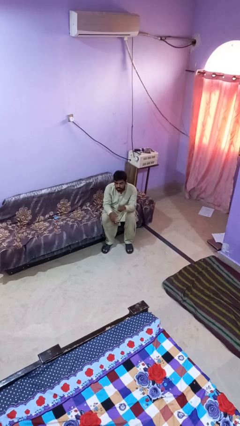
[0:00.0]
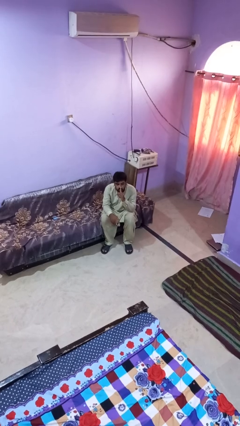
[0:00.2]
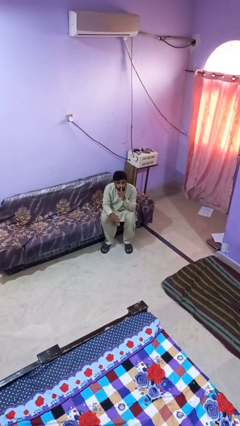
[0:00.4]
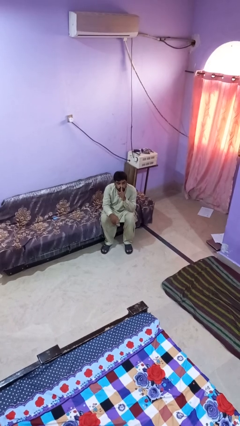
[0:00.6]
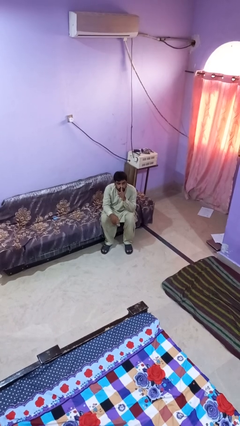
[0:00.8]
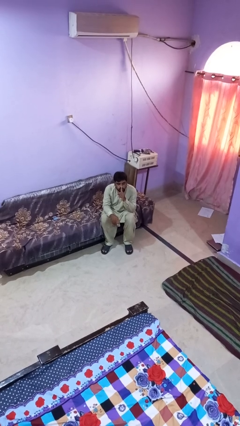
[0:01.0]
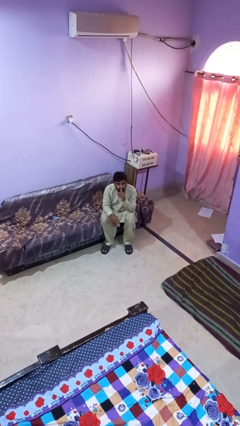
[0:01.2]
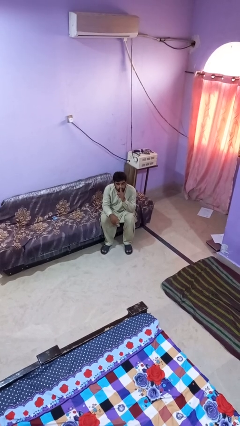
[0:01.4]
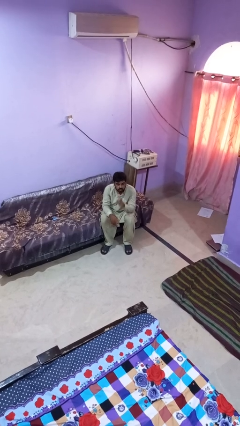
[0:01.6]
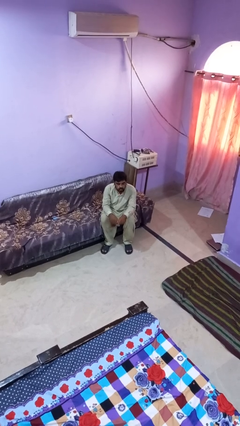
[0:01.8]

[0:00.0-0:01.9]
person gestures be quiet

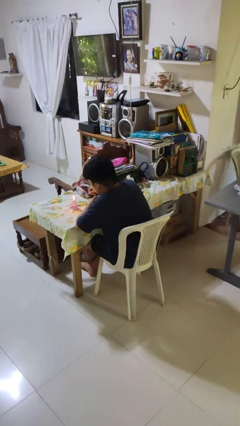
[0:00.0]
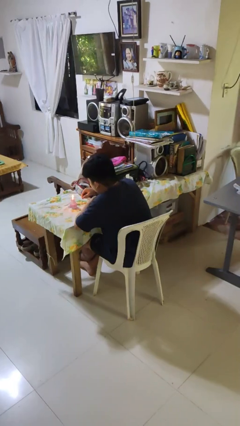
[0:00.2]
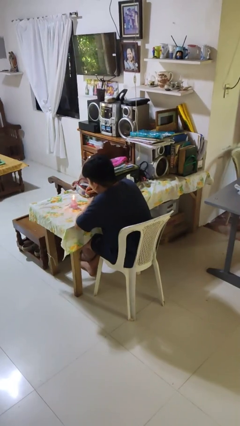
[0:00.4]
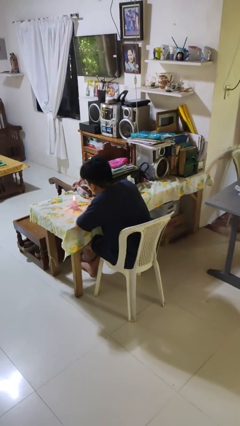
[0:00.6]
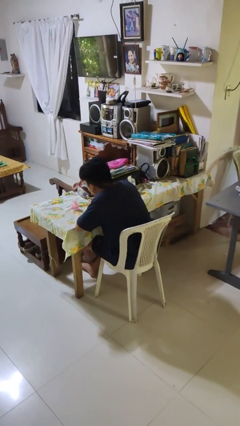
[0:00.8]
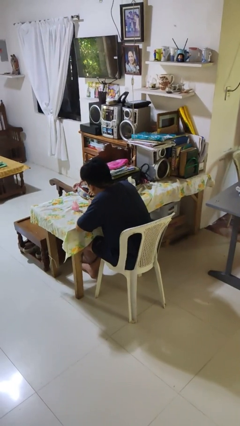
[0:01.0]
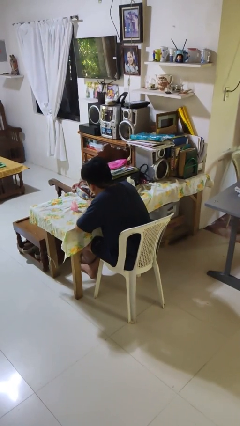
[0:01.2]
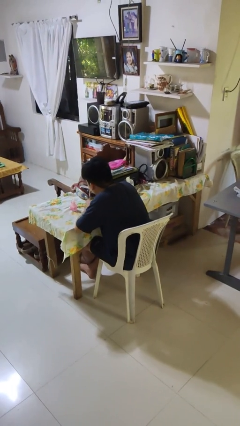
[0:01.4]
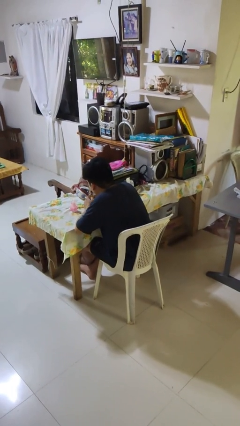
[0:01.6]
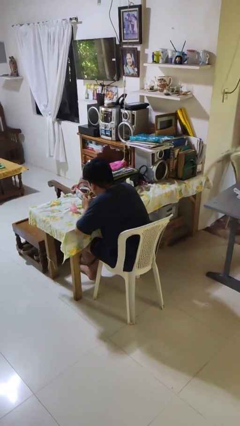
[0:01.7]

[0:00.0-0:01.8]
person extinguishes candle

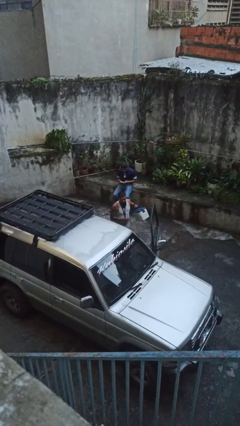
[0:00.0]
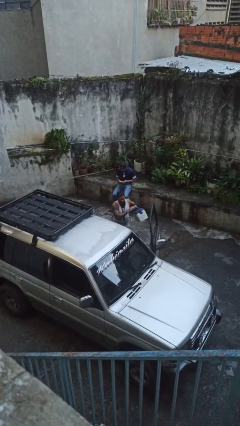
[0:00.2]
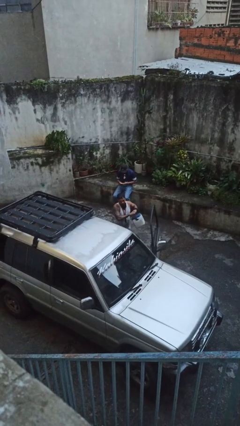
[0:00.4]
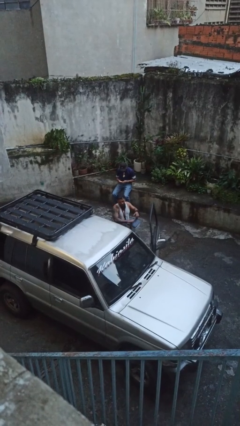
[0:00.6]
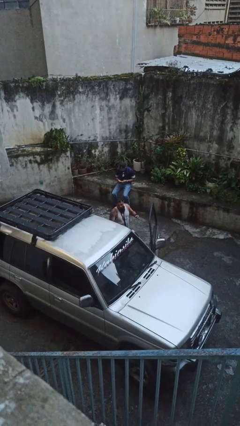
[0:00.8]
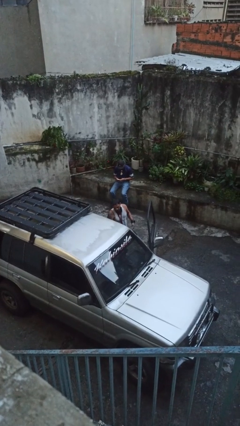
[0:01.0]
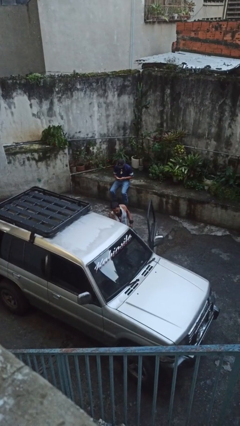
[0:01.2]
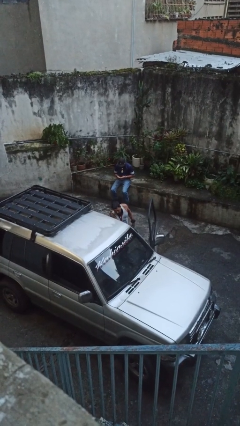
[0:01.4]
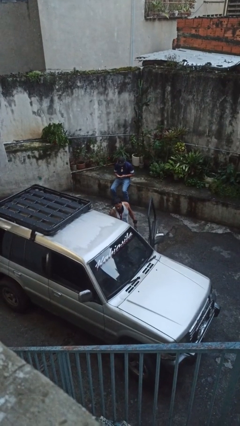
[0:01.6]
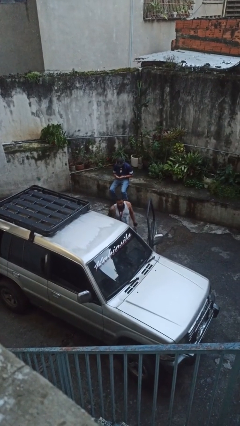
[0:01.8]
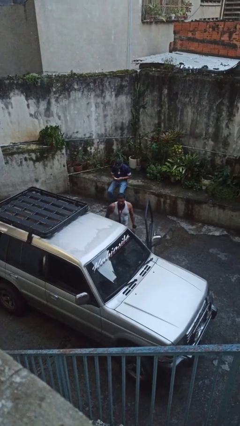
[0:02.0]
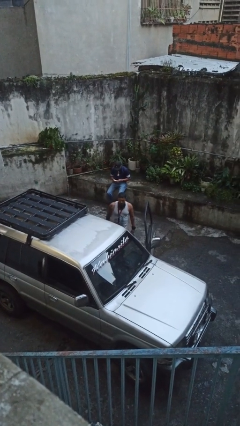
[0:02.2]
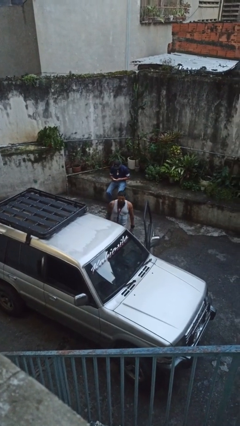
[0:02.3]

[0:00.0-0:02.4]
person loads car

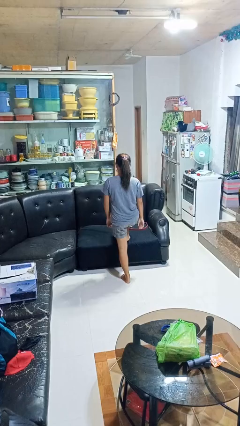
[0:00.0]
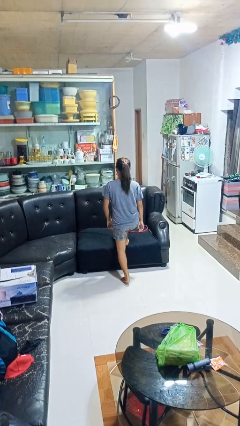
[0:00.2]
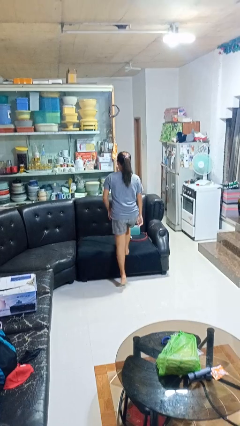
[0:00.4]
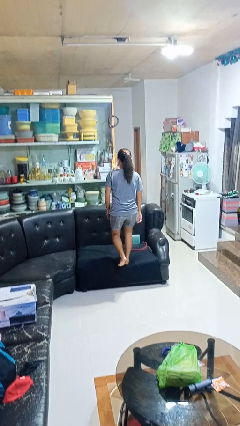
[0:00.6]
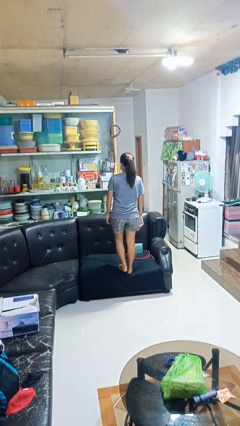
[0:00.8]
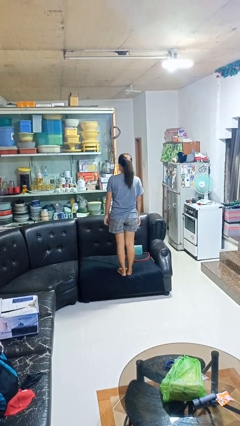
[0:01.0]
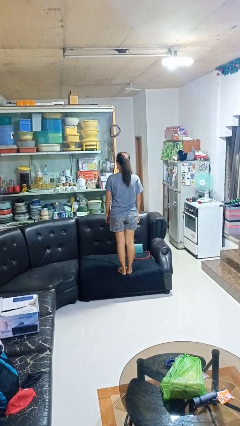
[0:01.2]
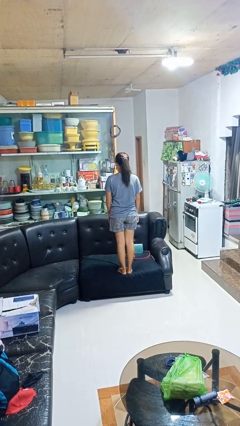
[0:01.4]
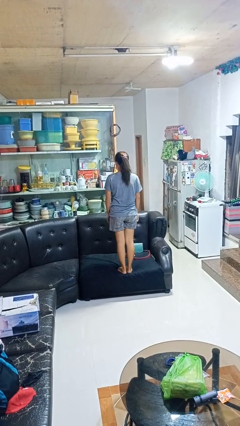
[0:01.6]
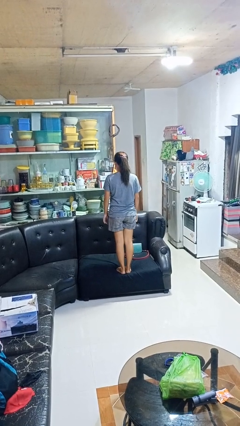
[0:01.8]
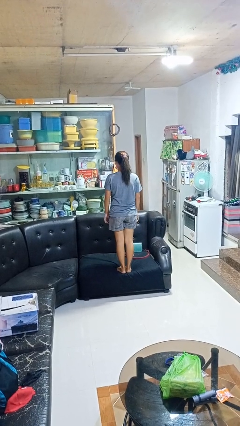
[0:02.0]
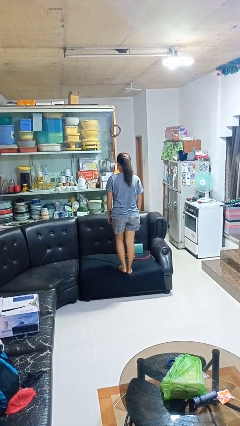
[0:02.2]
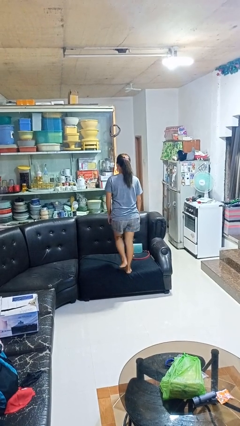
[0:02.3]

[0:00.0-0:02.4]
person climbs on couch

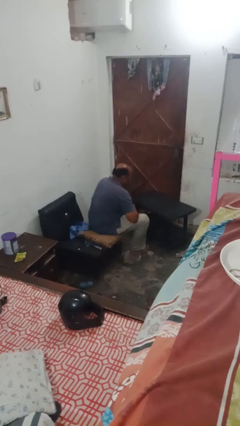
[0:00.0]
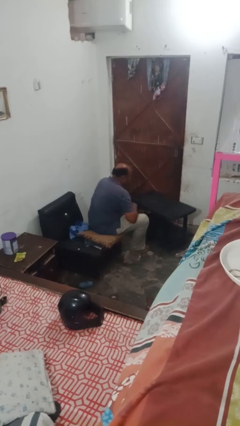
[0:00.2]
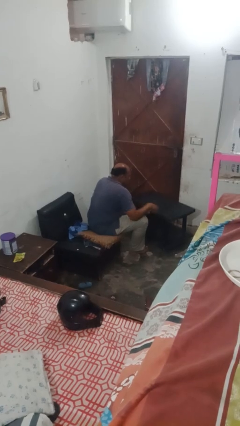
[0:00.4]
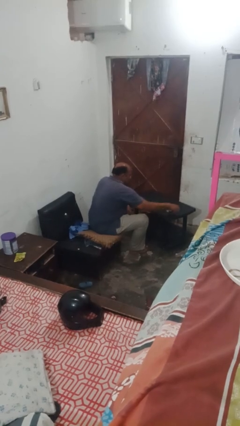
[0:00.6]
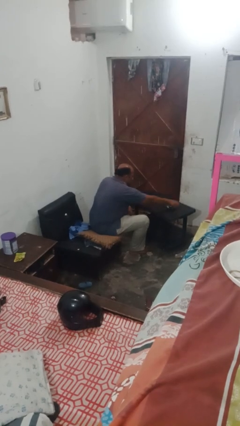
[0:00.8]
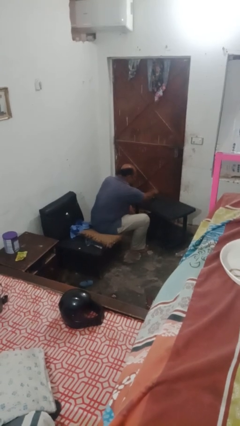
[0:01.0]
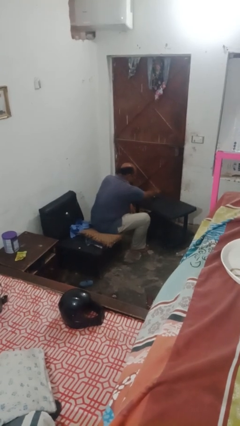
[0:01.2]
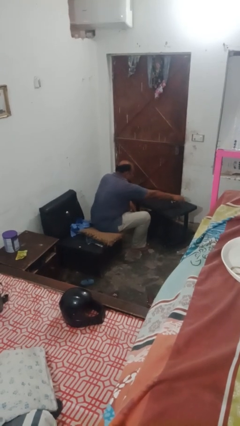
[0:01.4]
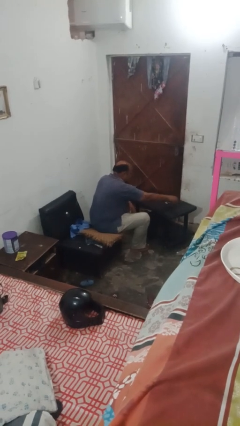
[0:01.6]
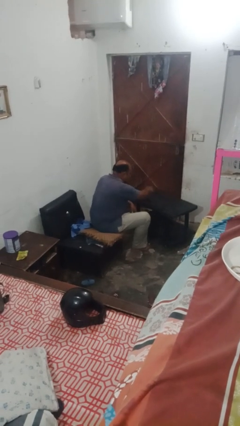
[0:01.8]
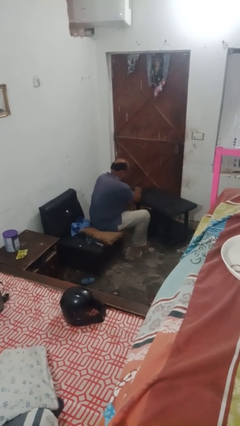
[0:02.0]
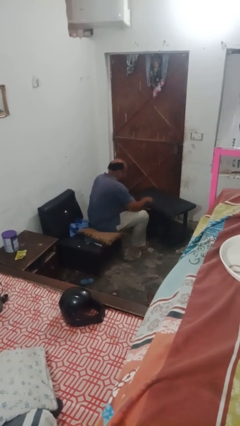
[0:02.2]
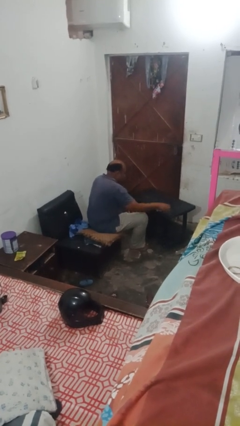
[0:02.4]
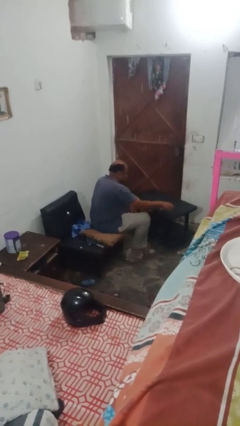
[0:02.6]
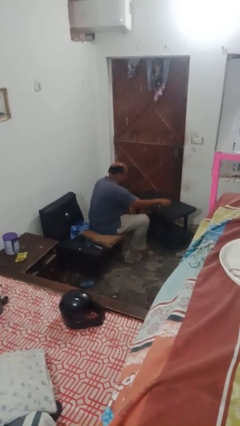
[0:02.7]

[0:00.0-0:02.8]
person sprays from bottle

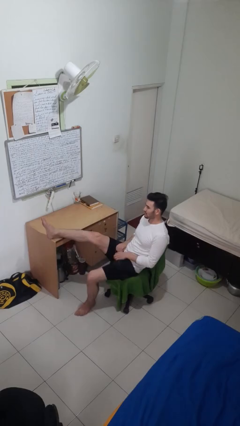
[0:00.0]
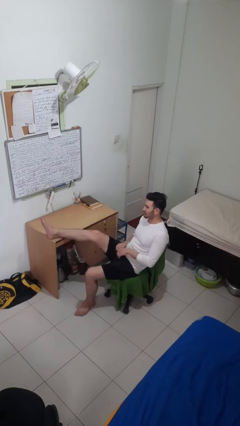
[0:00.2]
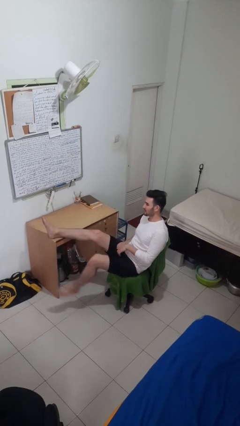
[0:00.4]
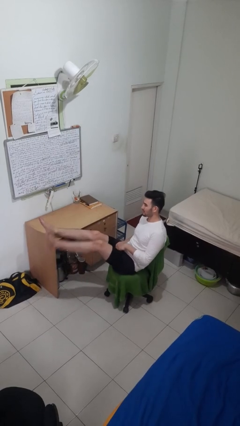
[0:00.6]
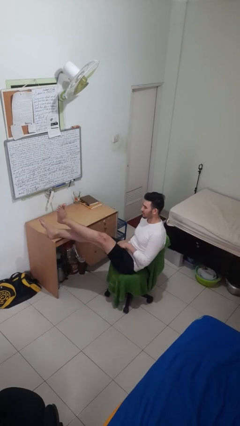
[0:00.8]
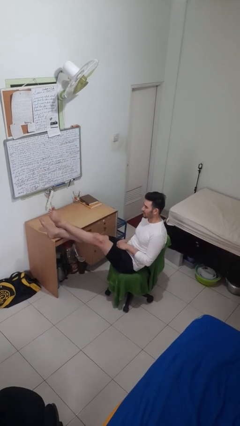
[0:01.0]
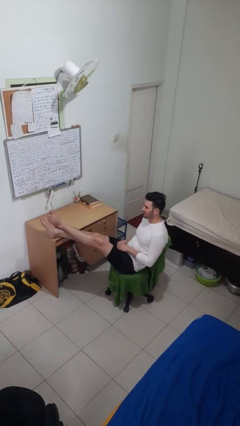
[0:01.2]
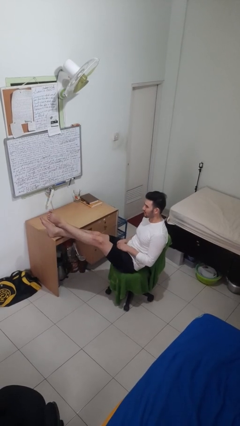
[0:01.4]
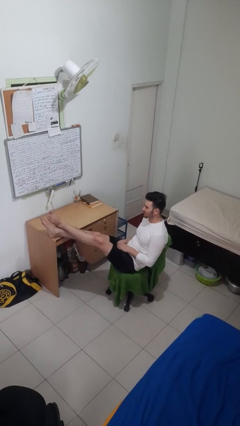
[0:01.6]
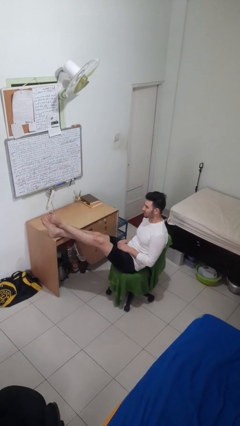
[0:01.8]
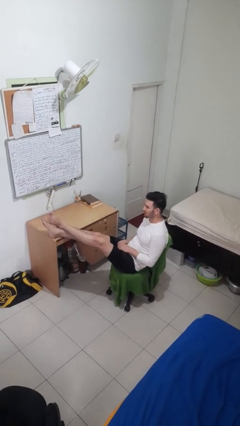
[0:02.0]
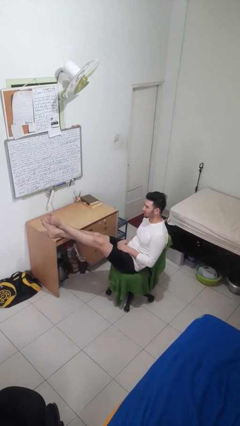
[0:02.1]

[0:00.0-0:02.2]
person puts feet up

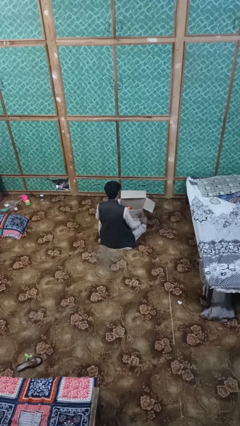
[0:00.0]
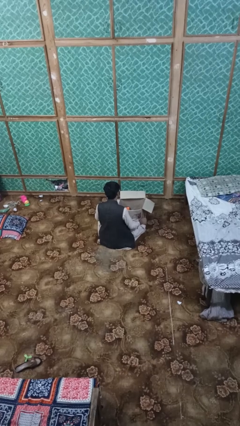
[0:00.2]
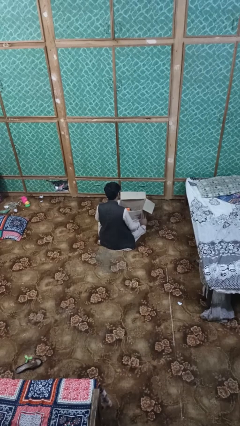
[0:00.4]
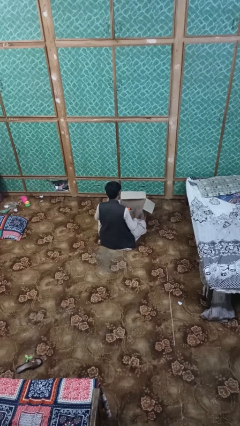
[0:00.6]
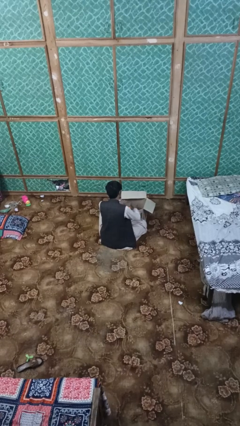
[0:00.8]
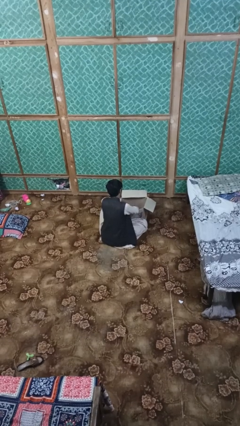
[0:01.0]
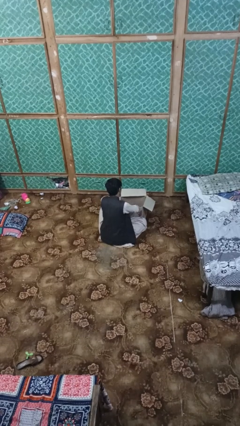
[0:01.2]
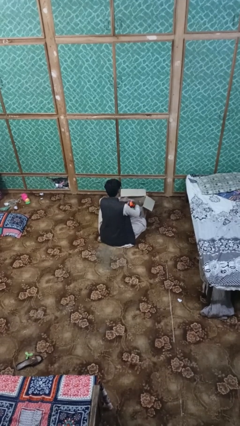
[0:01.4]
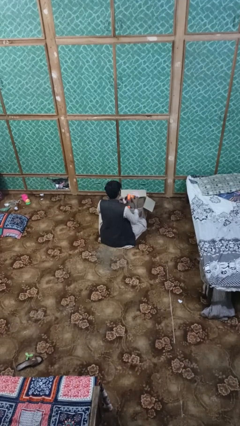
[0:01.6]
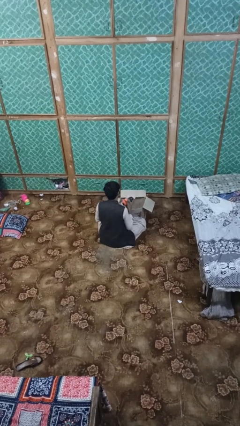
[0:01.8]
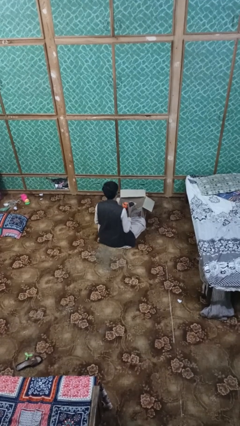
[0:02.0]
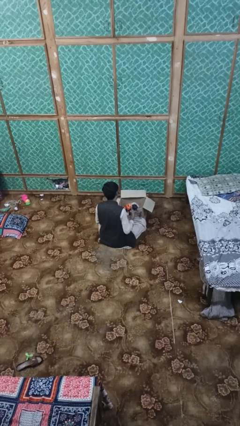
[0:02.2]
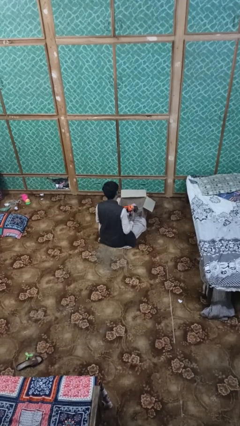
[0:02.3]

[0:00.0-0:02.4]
person takes object from box

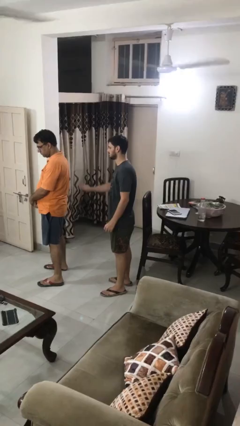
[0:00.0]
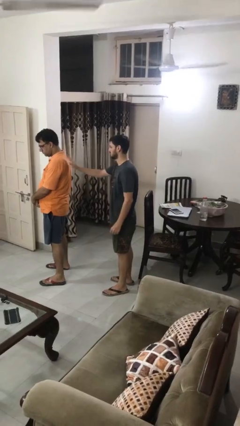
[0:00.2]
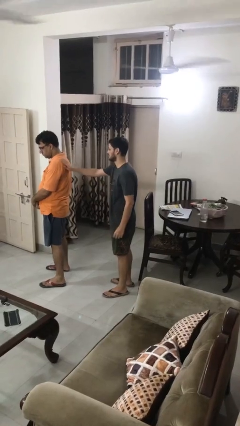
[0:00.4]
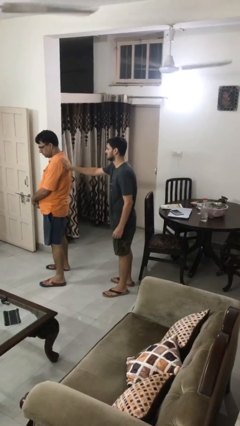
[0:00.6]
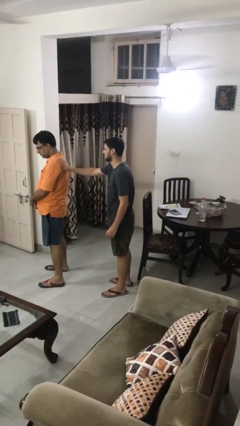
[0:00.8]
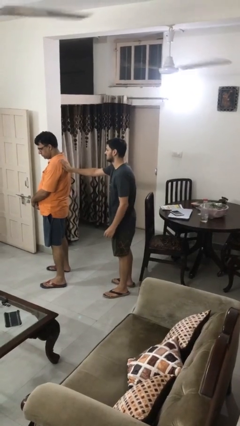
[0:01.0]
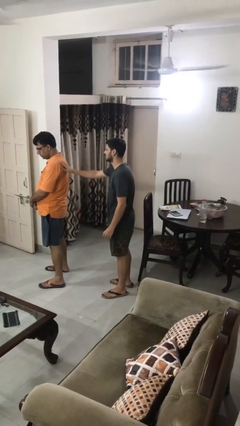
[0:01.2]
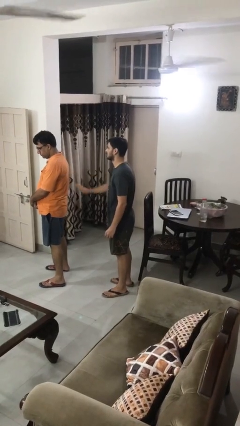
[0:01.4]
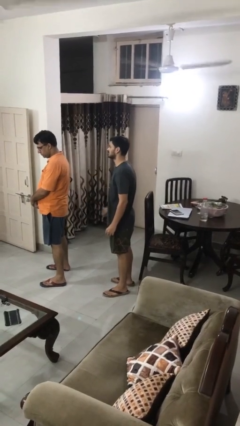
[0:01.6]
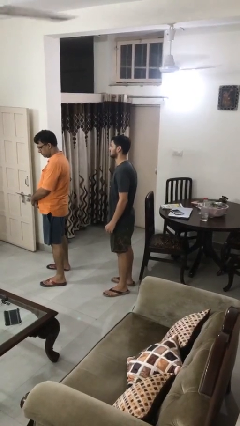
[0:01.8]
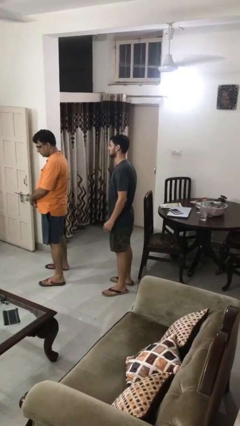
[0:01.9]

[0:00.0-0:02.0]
person touches back of person
